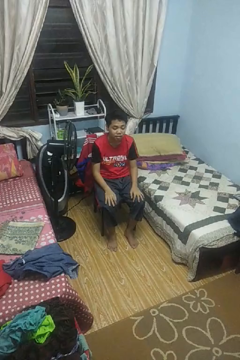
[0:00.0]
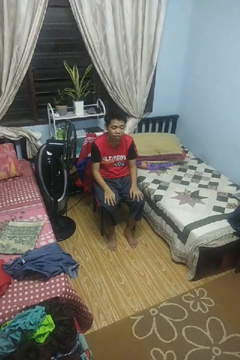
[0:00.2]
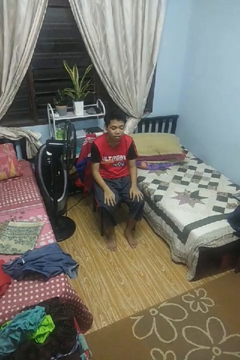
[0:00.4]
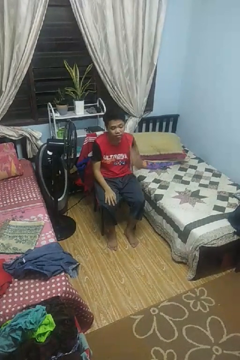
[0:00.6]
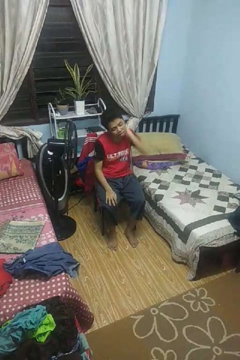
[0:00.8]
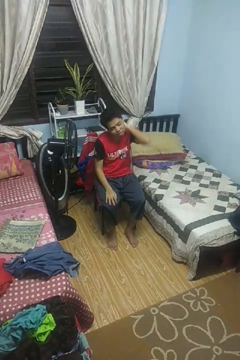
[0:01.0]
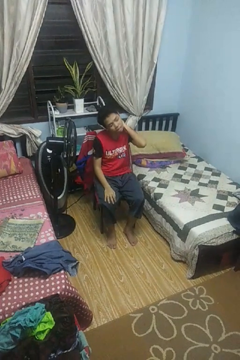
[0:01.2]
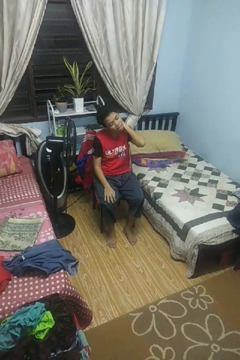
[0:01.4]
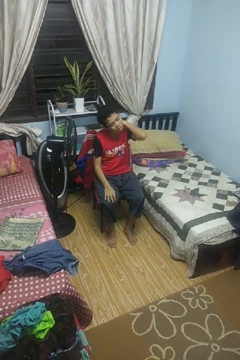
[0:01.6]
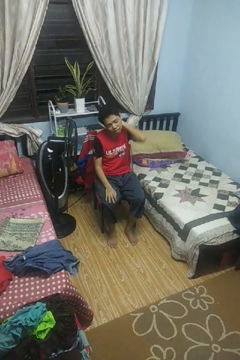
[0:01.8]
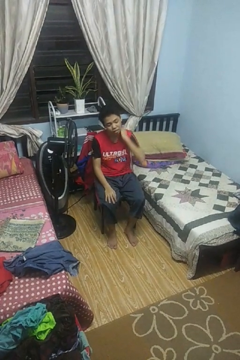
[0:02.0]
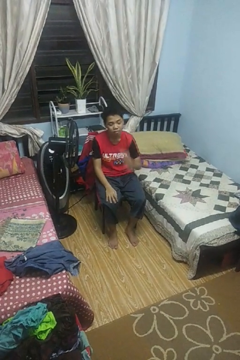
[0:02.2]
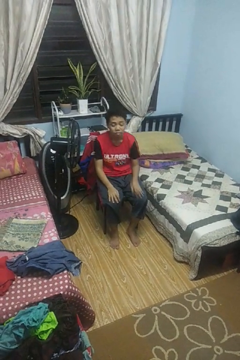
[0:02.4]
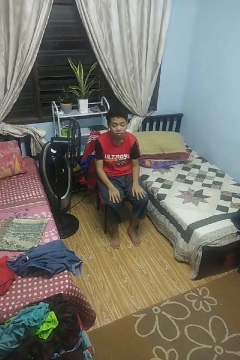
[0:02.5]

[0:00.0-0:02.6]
person rubs neck

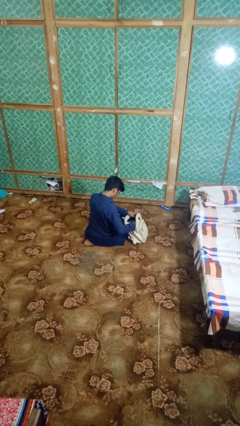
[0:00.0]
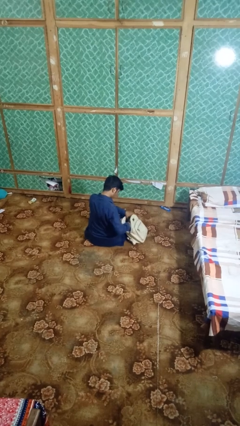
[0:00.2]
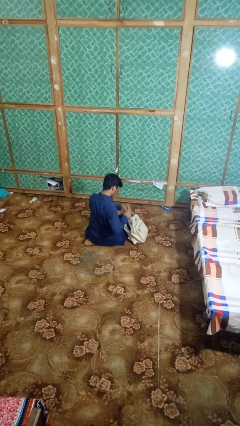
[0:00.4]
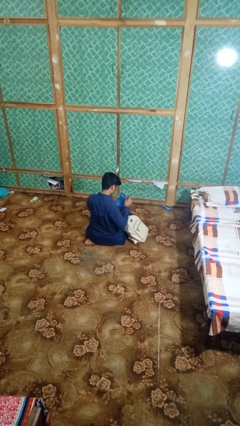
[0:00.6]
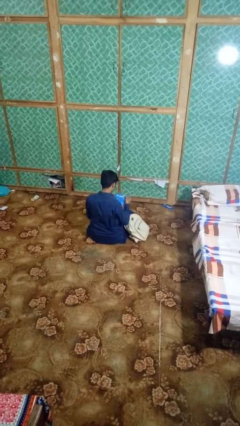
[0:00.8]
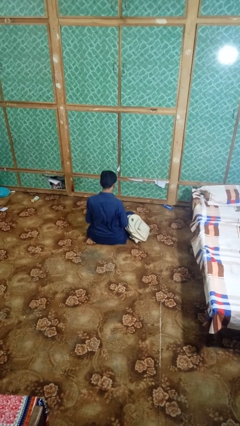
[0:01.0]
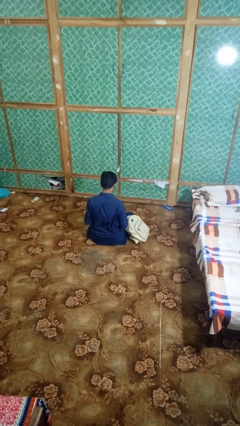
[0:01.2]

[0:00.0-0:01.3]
person takes object from backpack

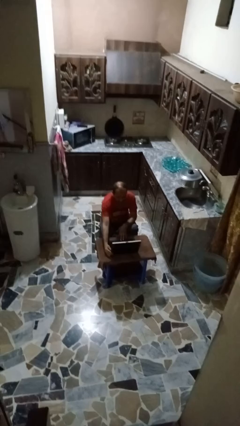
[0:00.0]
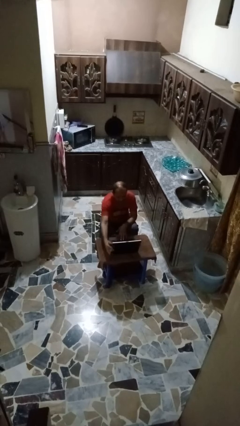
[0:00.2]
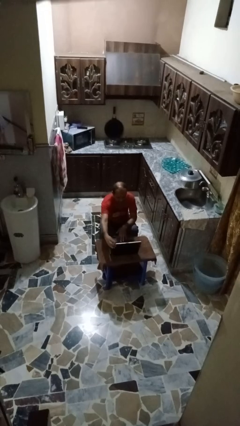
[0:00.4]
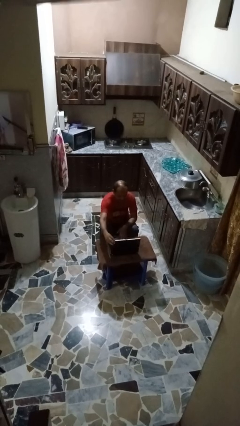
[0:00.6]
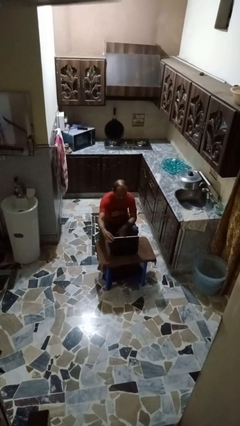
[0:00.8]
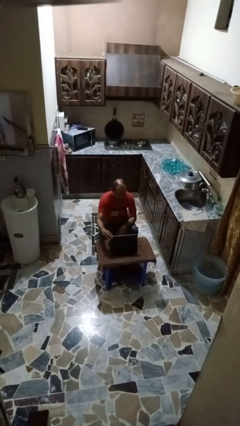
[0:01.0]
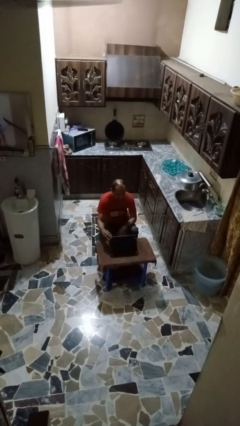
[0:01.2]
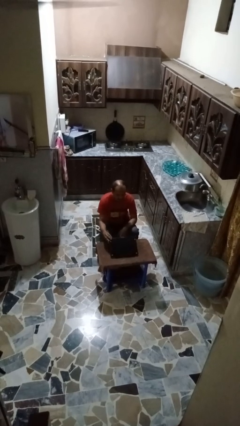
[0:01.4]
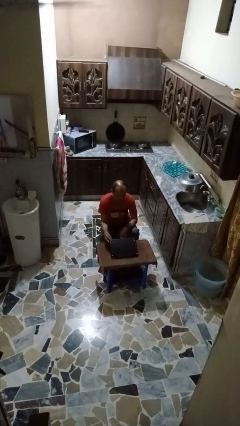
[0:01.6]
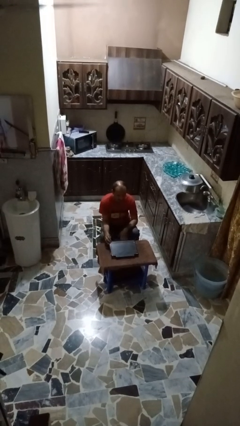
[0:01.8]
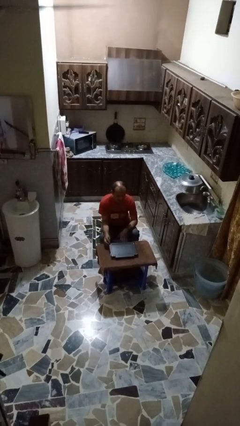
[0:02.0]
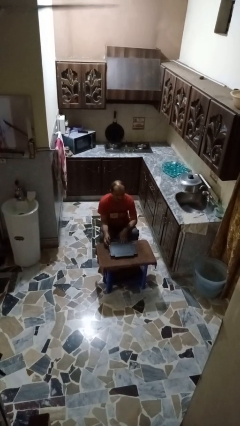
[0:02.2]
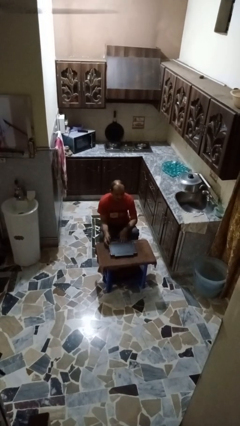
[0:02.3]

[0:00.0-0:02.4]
person closes laptop

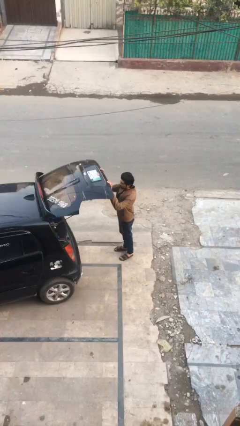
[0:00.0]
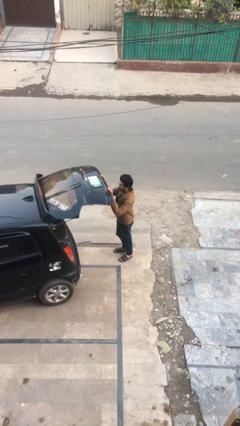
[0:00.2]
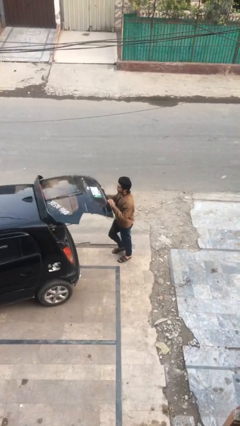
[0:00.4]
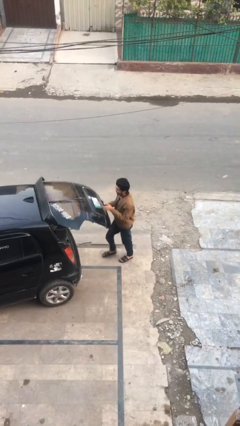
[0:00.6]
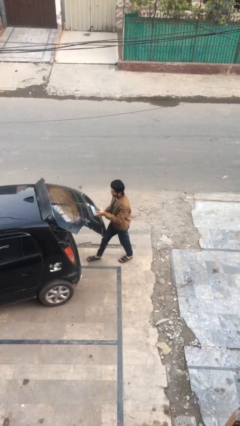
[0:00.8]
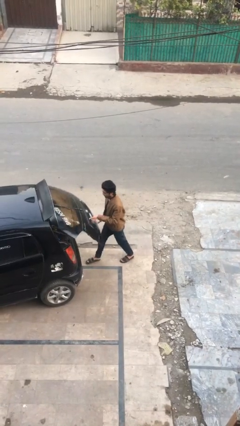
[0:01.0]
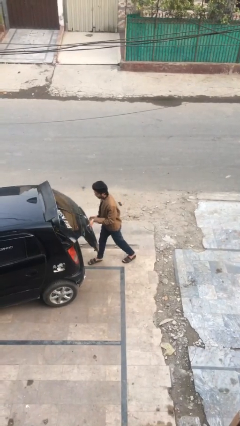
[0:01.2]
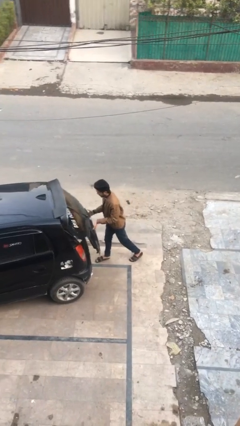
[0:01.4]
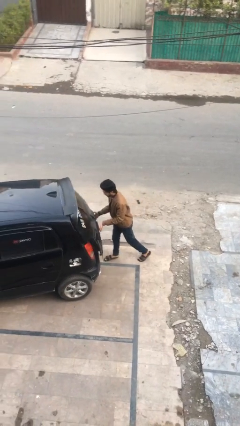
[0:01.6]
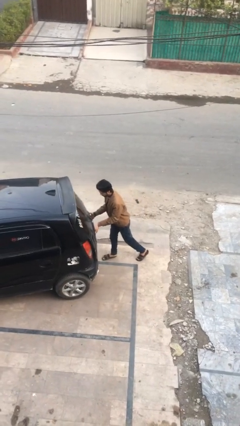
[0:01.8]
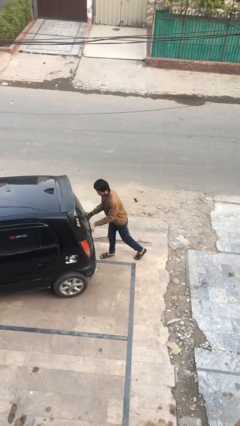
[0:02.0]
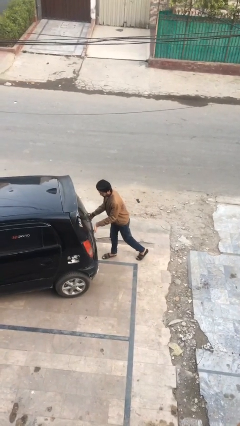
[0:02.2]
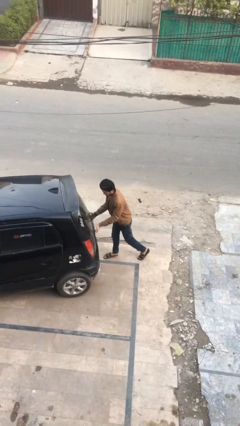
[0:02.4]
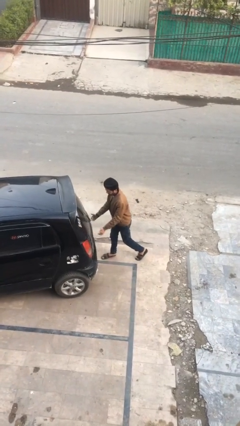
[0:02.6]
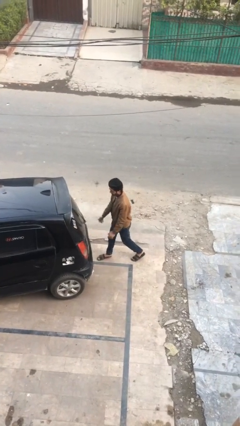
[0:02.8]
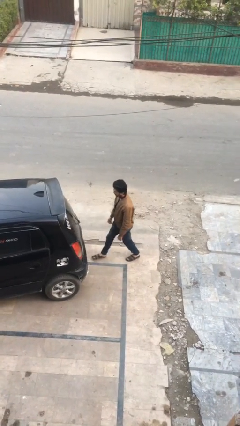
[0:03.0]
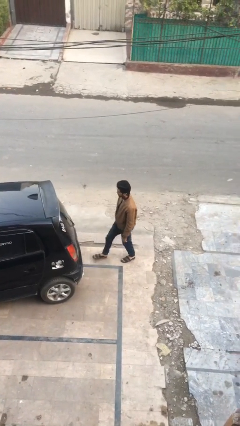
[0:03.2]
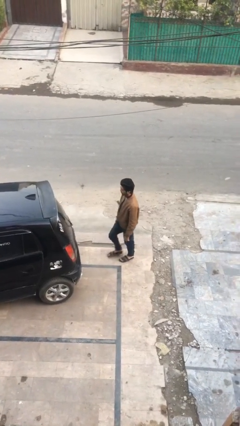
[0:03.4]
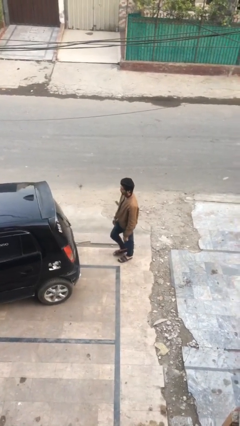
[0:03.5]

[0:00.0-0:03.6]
person closes car trunk

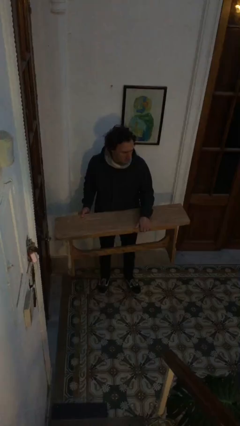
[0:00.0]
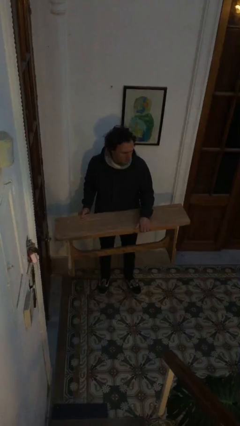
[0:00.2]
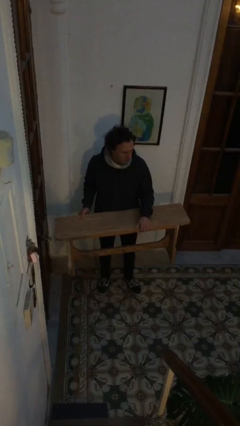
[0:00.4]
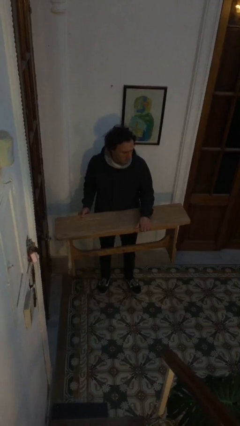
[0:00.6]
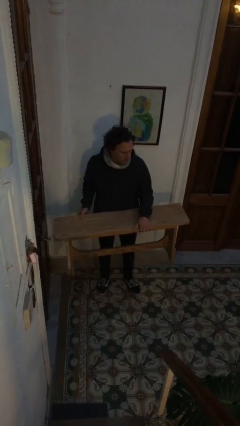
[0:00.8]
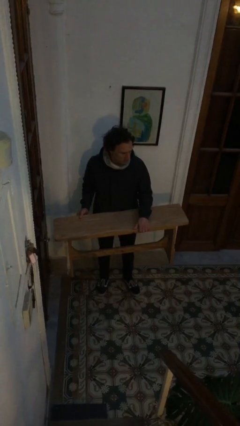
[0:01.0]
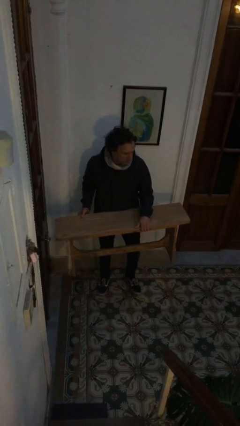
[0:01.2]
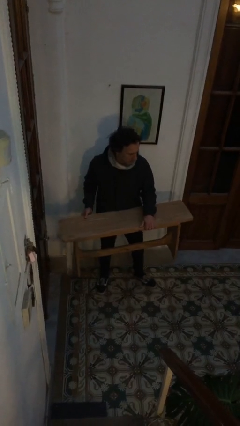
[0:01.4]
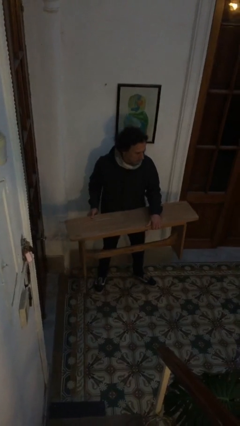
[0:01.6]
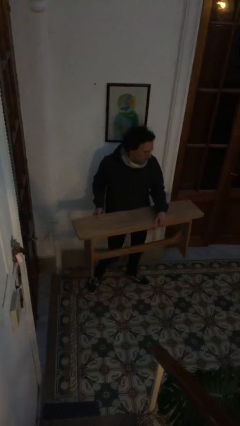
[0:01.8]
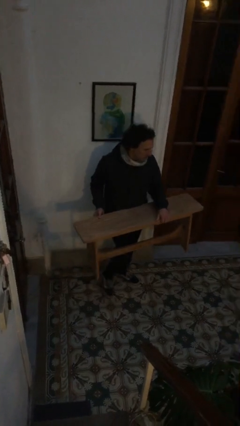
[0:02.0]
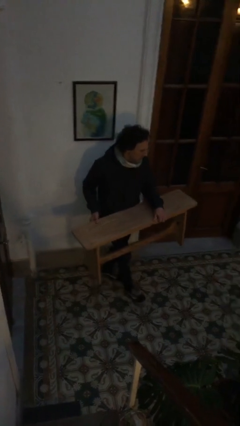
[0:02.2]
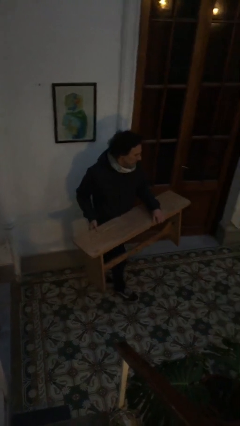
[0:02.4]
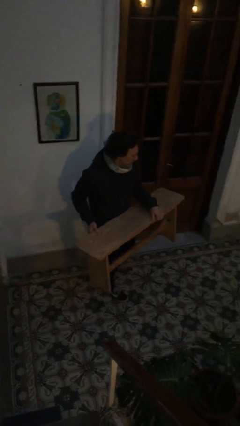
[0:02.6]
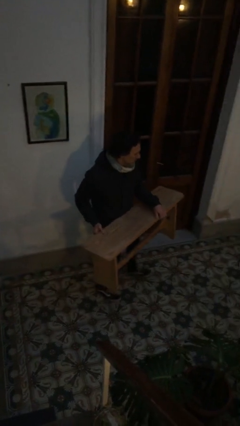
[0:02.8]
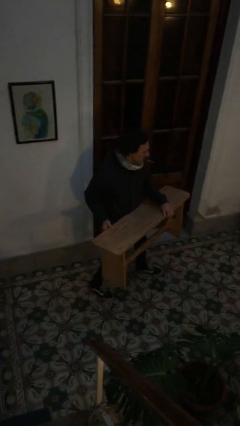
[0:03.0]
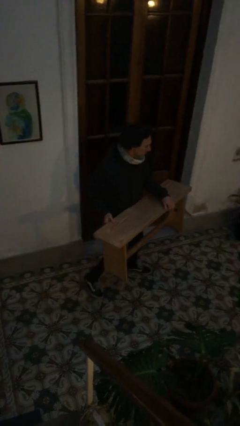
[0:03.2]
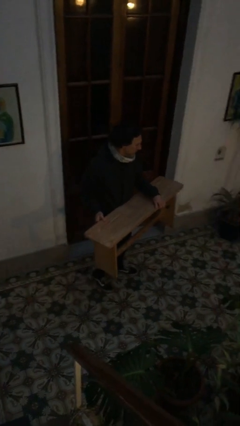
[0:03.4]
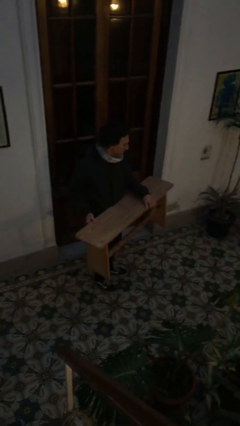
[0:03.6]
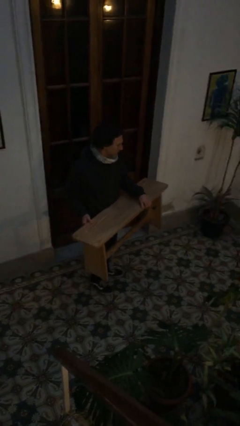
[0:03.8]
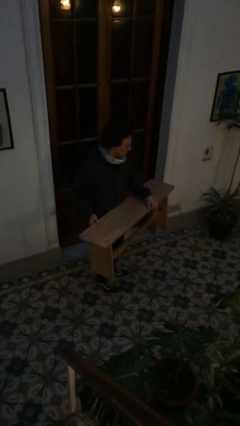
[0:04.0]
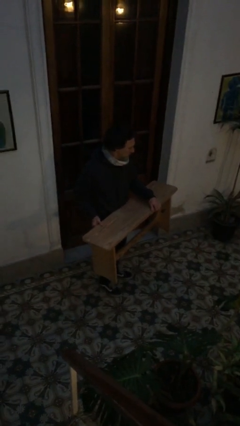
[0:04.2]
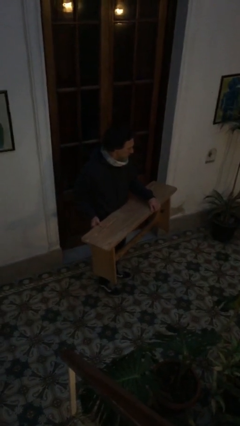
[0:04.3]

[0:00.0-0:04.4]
person carries furniture

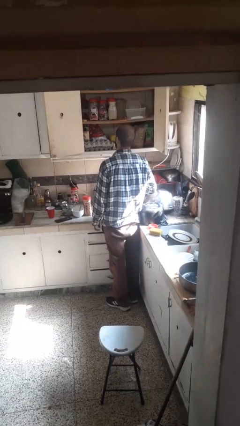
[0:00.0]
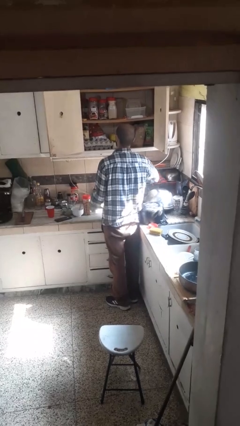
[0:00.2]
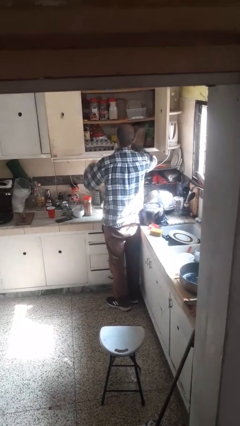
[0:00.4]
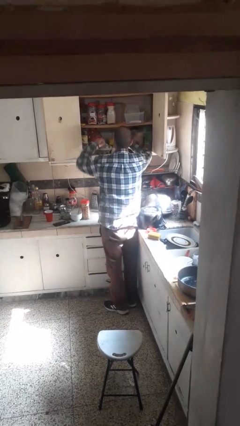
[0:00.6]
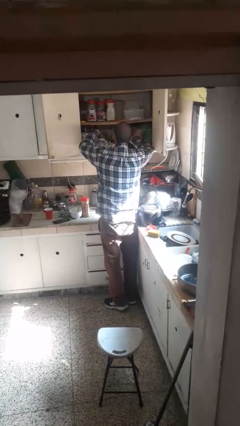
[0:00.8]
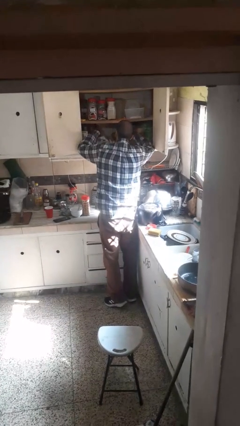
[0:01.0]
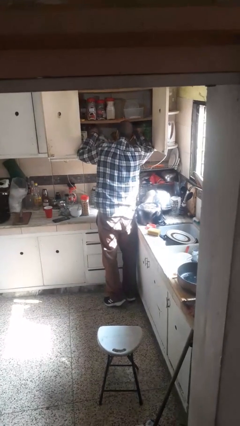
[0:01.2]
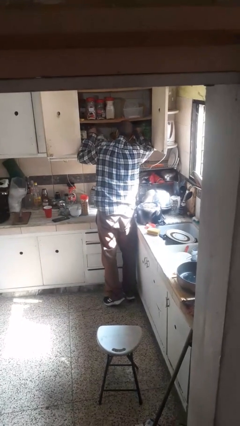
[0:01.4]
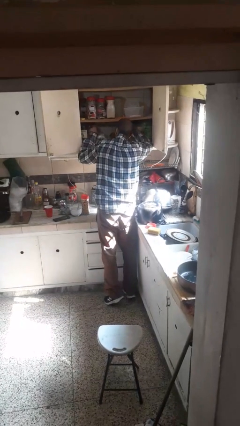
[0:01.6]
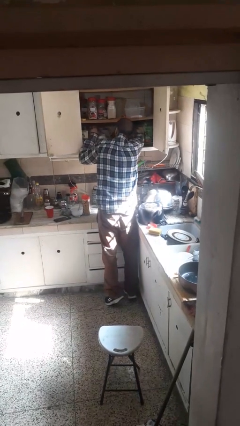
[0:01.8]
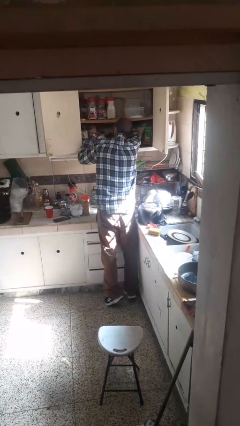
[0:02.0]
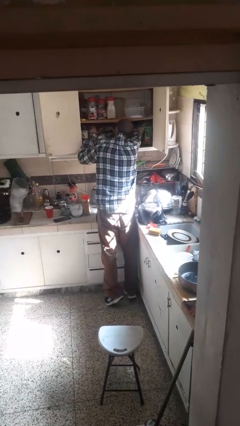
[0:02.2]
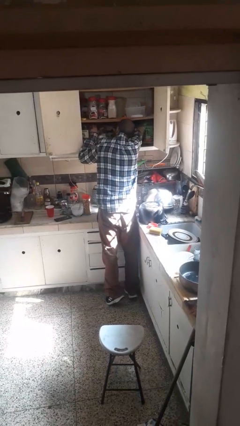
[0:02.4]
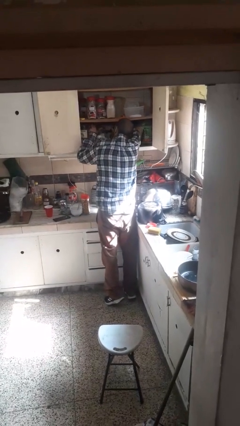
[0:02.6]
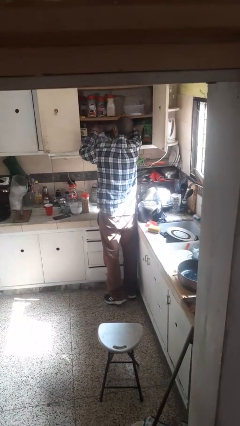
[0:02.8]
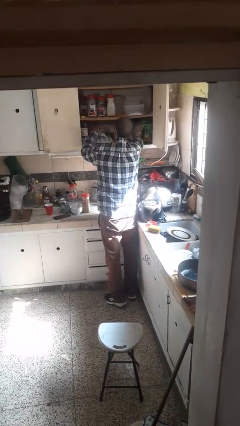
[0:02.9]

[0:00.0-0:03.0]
person searches in cabinet

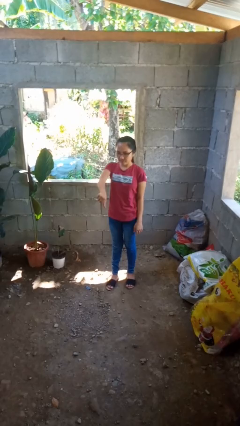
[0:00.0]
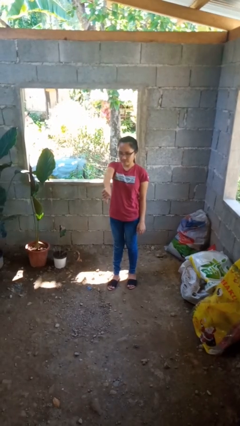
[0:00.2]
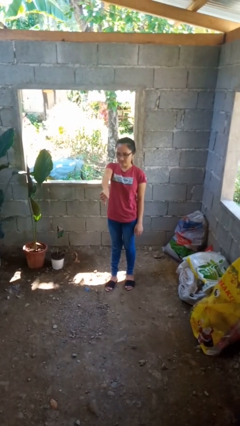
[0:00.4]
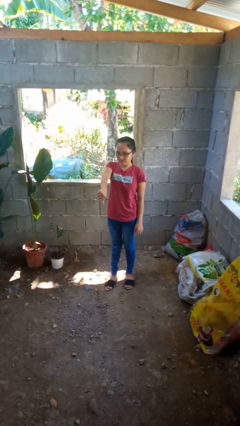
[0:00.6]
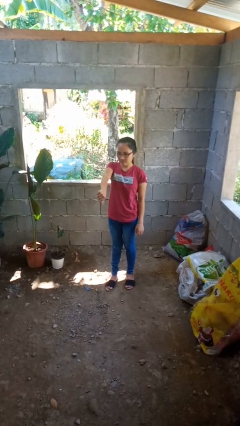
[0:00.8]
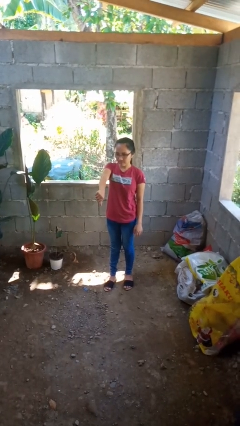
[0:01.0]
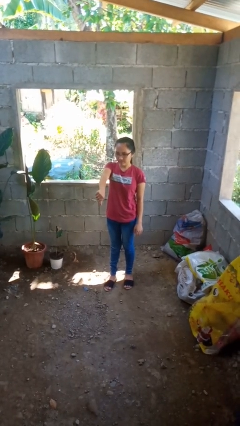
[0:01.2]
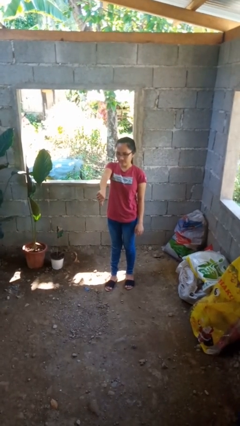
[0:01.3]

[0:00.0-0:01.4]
person gestures thumbs down
